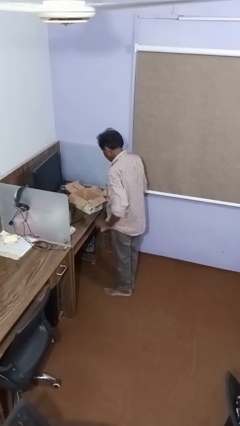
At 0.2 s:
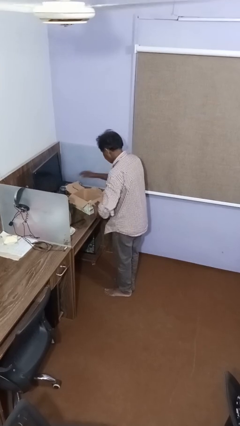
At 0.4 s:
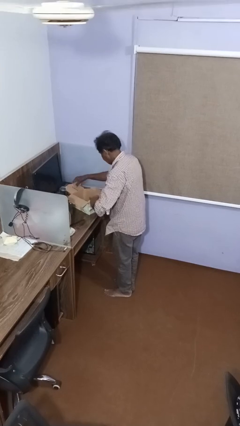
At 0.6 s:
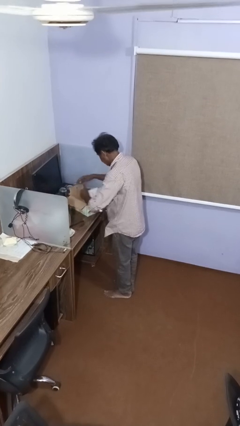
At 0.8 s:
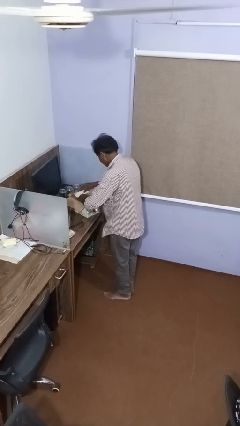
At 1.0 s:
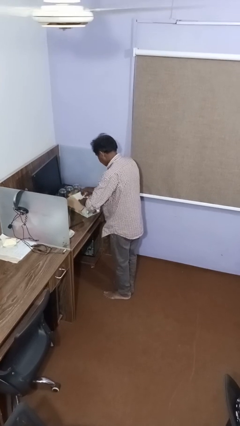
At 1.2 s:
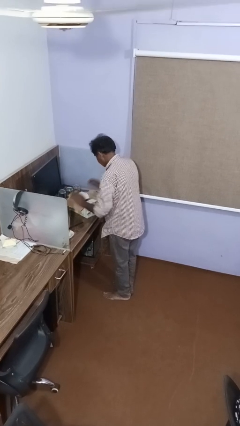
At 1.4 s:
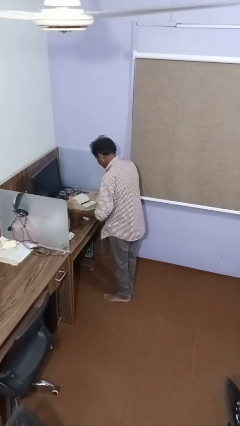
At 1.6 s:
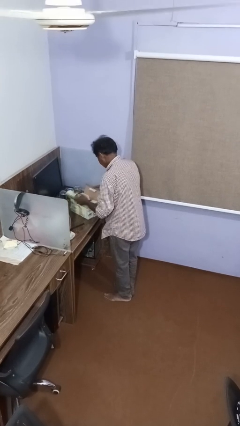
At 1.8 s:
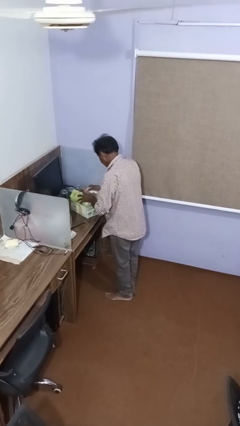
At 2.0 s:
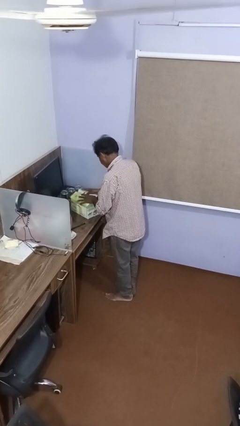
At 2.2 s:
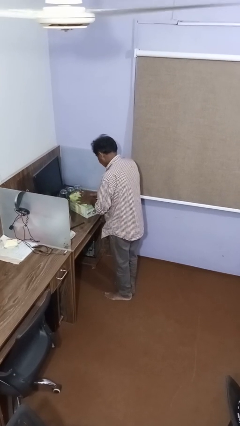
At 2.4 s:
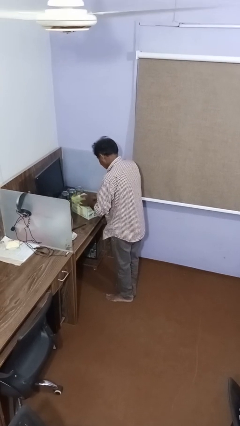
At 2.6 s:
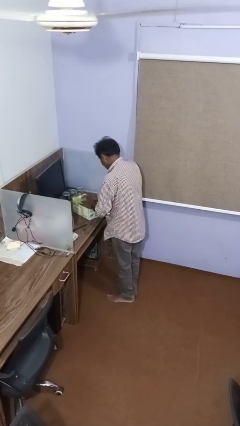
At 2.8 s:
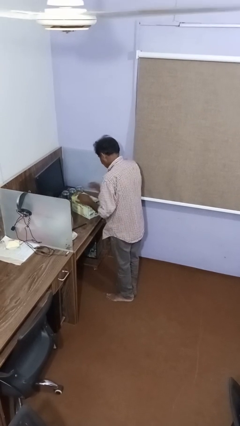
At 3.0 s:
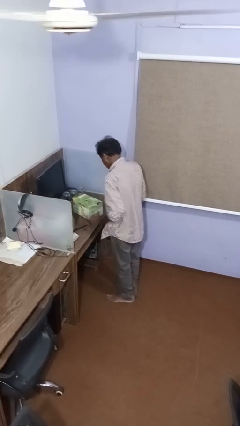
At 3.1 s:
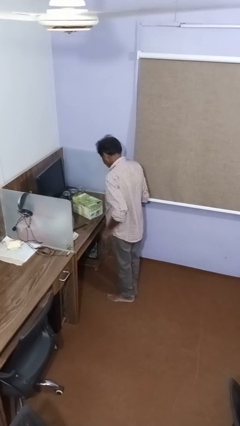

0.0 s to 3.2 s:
person closes box

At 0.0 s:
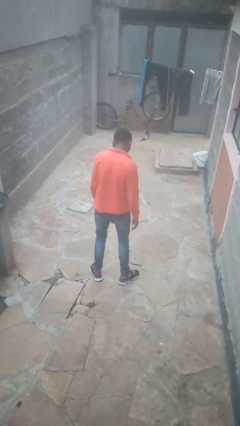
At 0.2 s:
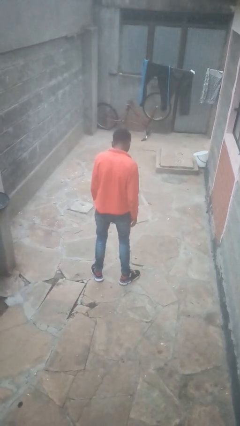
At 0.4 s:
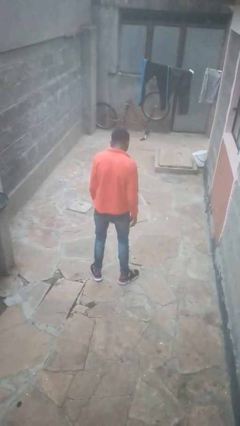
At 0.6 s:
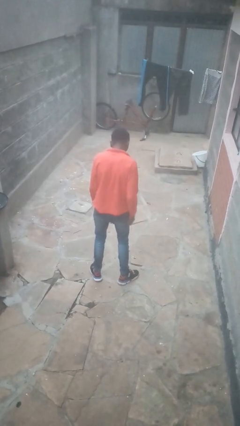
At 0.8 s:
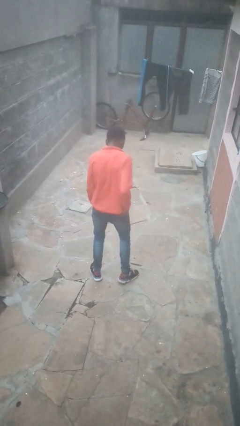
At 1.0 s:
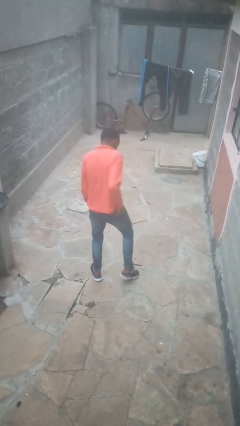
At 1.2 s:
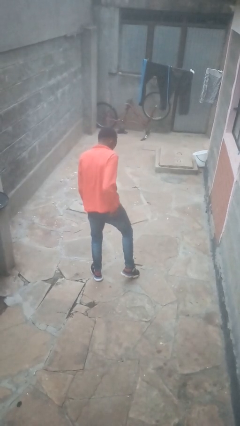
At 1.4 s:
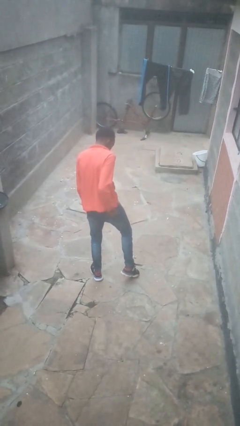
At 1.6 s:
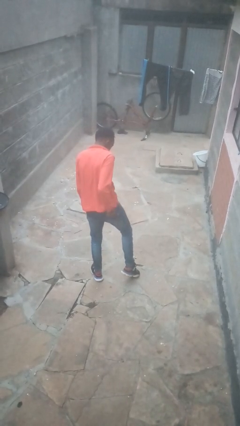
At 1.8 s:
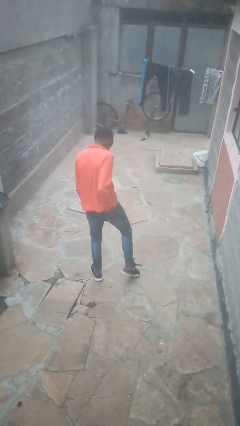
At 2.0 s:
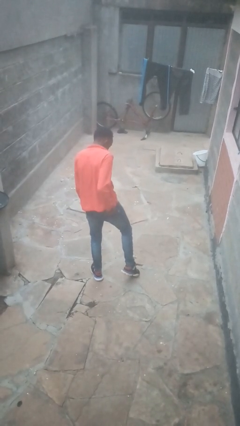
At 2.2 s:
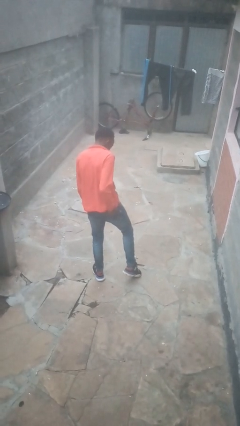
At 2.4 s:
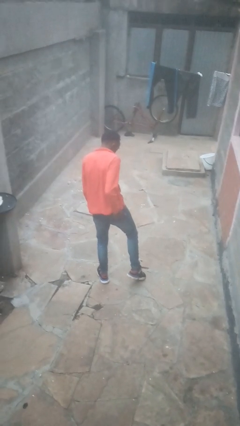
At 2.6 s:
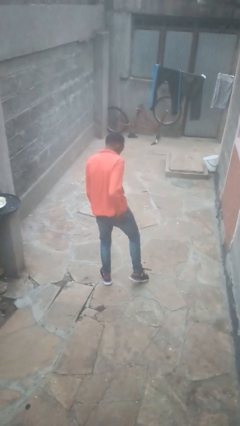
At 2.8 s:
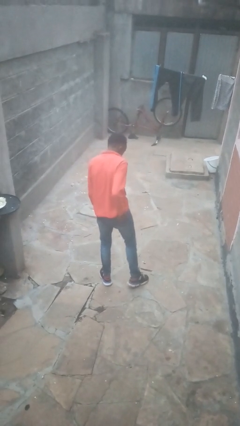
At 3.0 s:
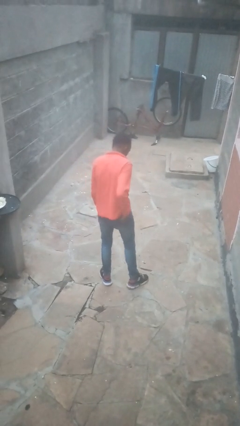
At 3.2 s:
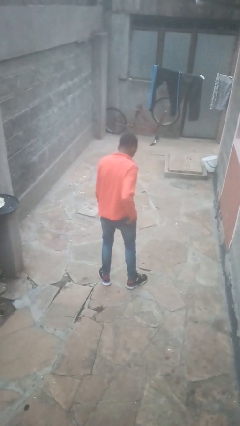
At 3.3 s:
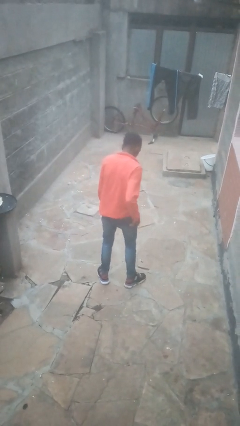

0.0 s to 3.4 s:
person puts hands in back pockets

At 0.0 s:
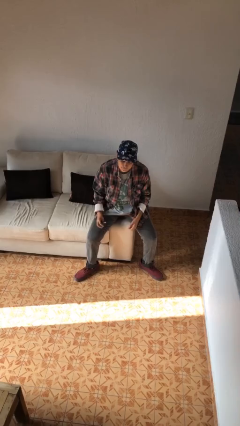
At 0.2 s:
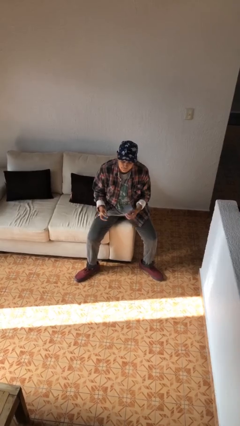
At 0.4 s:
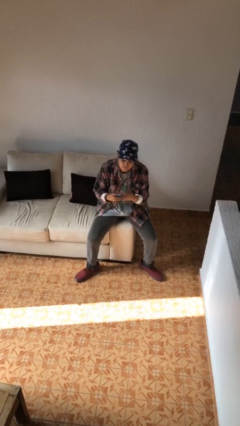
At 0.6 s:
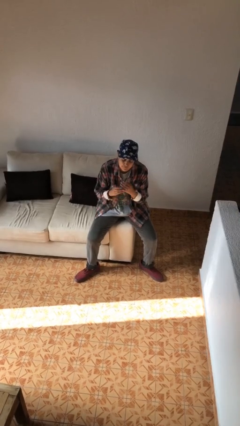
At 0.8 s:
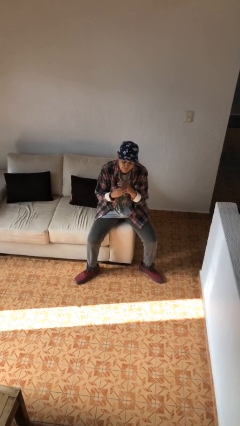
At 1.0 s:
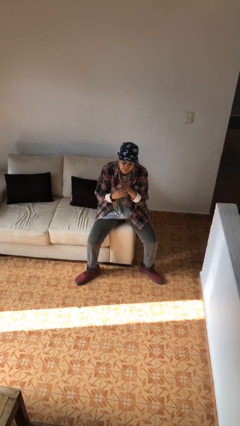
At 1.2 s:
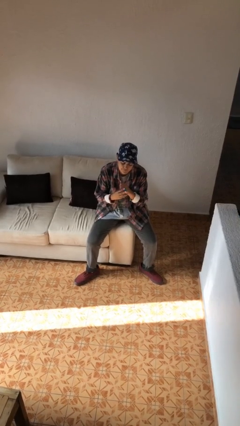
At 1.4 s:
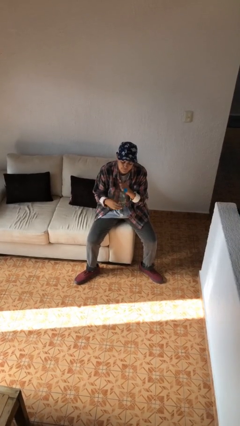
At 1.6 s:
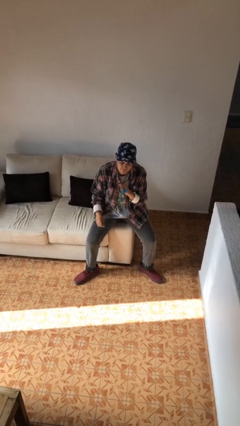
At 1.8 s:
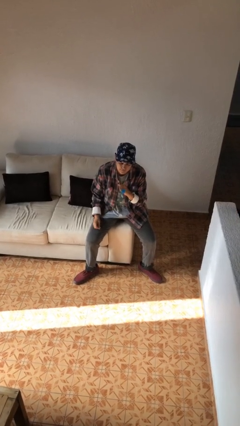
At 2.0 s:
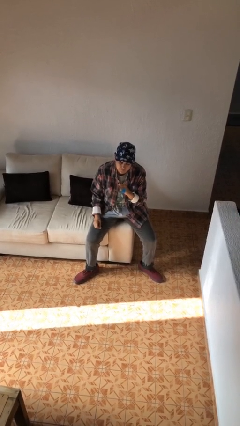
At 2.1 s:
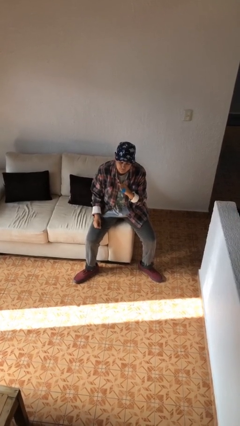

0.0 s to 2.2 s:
person puts on ring

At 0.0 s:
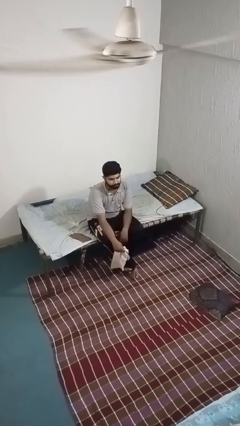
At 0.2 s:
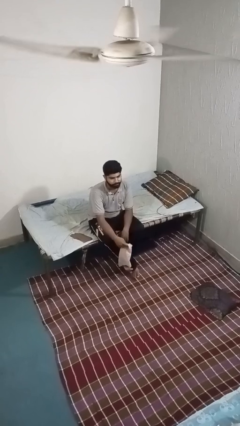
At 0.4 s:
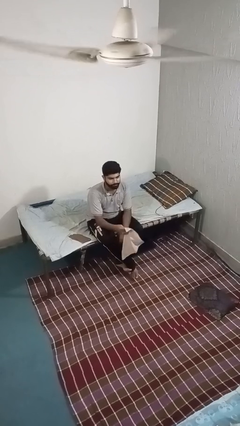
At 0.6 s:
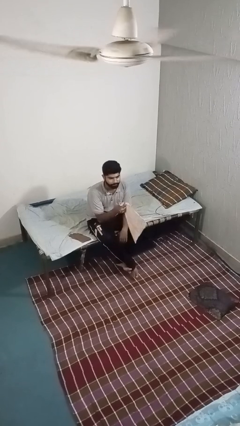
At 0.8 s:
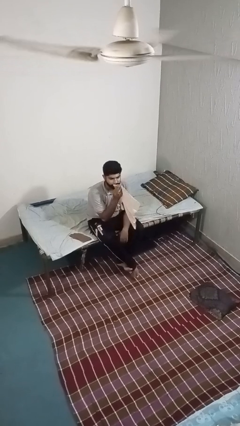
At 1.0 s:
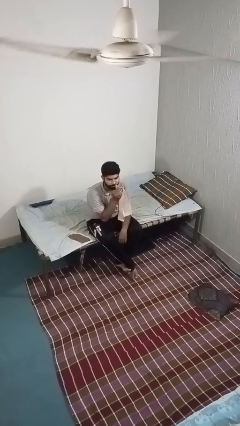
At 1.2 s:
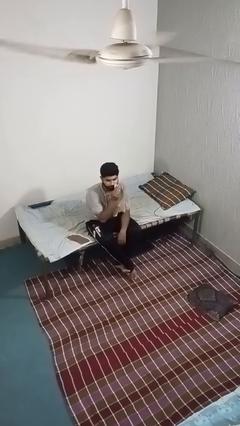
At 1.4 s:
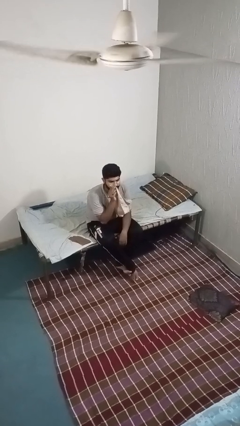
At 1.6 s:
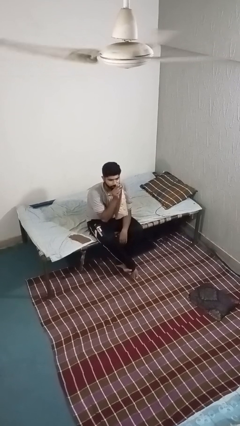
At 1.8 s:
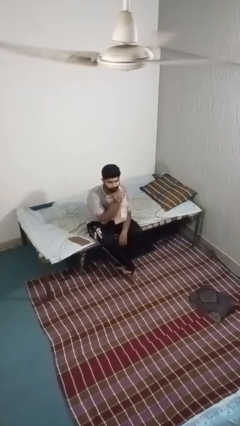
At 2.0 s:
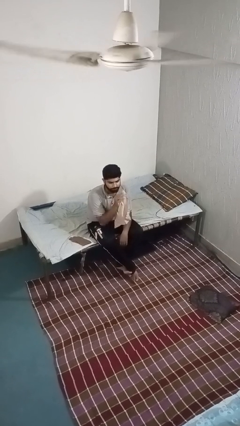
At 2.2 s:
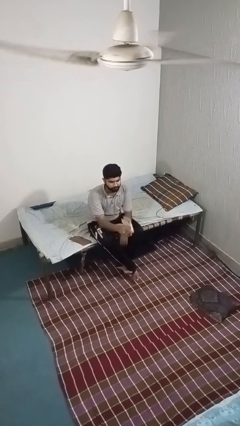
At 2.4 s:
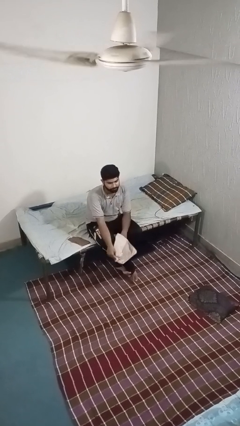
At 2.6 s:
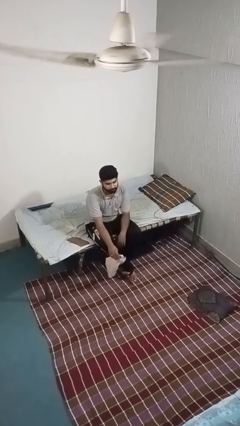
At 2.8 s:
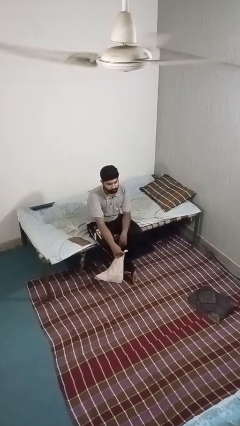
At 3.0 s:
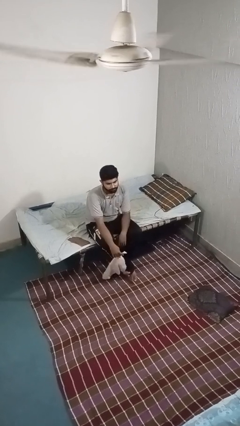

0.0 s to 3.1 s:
person wipes mouth with napkin

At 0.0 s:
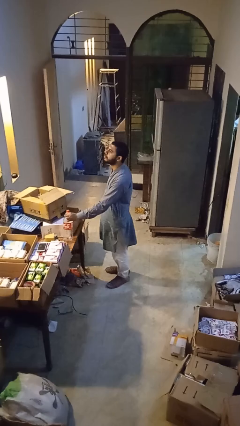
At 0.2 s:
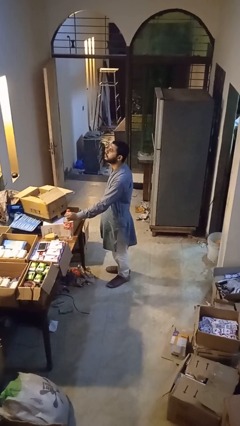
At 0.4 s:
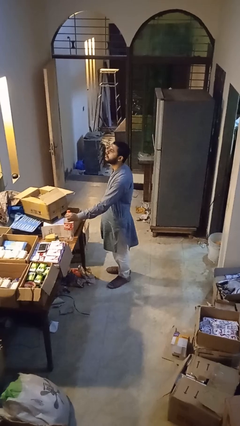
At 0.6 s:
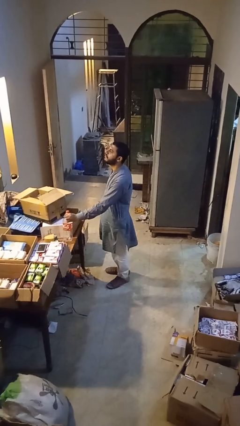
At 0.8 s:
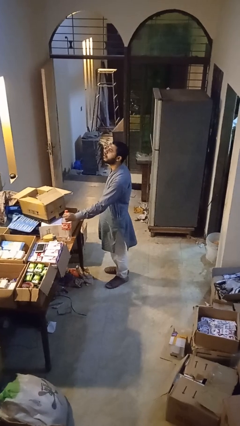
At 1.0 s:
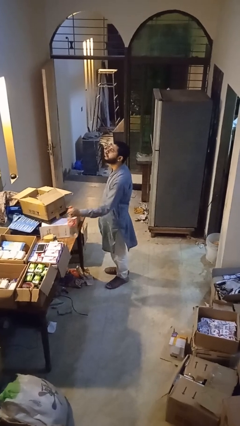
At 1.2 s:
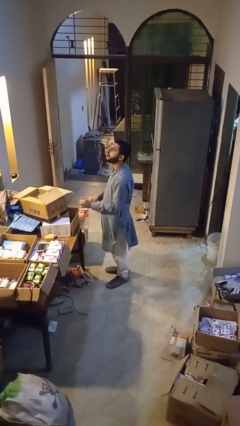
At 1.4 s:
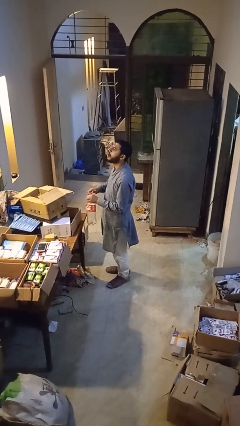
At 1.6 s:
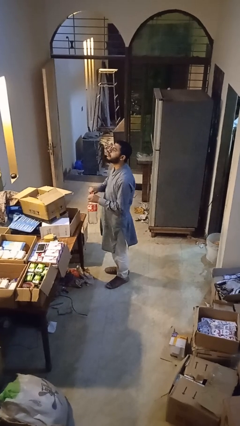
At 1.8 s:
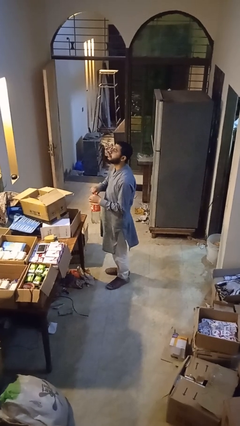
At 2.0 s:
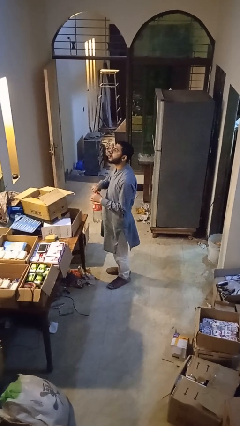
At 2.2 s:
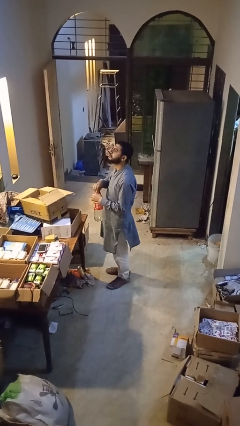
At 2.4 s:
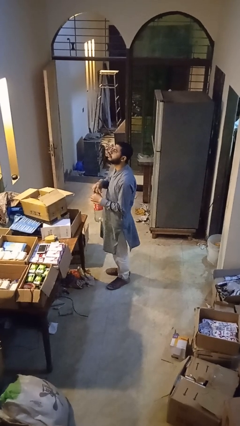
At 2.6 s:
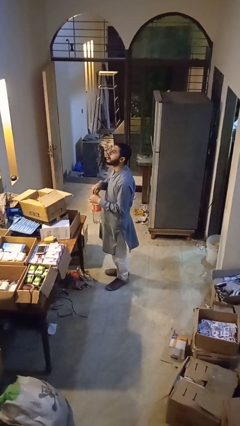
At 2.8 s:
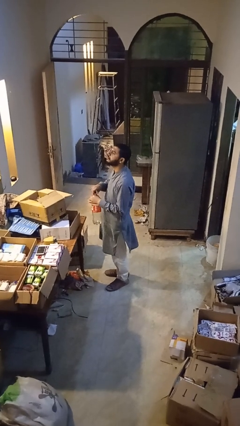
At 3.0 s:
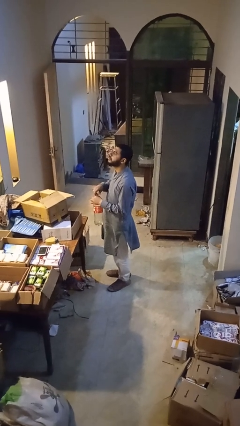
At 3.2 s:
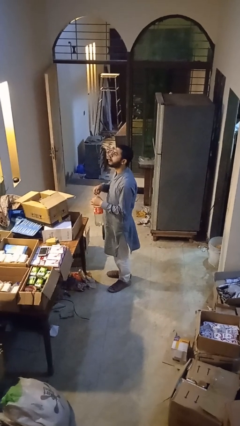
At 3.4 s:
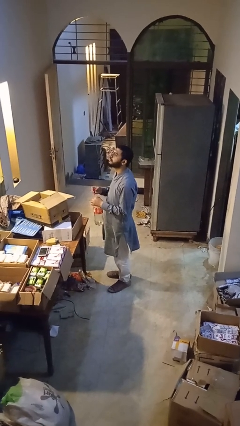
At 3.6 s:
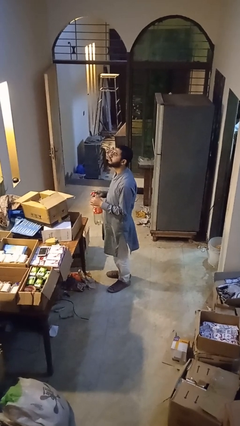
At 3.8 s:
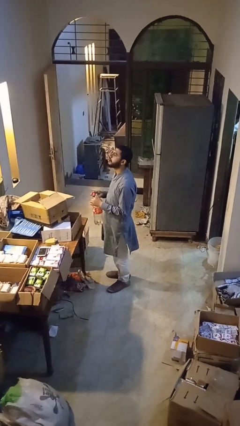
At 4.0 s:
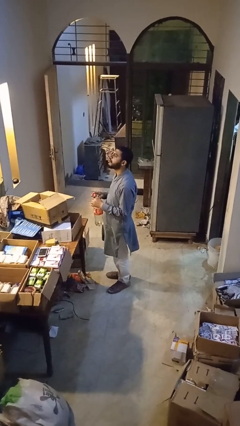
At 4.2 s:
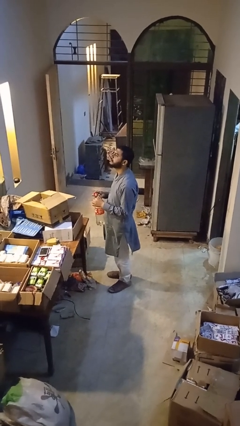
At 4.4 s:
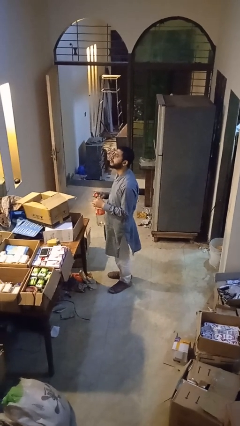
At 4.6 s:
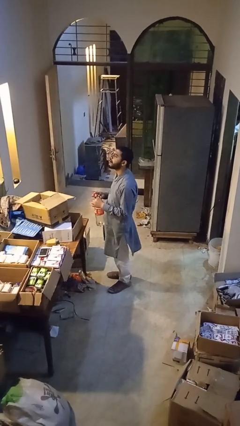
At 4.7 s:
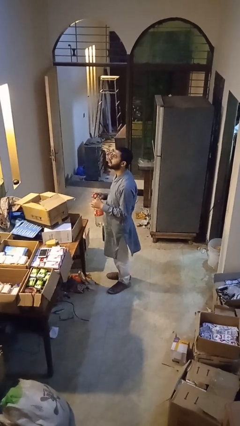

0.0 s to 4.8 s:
person unscrews lid from bottle

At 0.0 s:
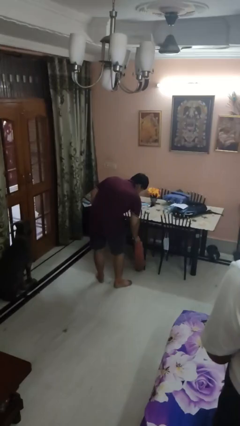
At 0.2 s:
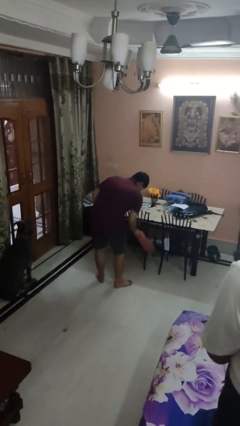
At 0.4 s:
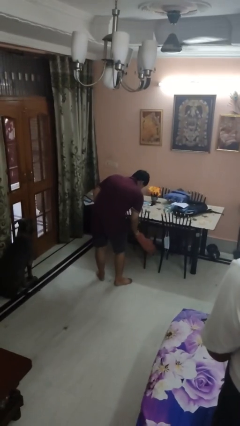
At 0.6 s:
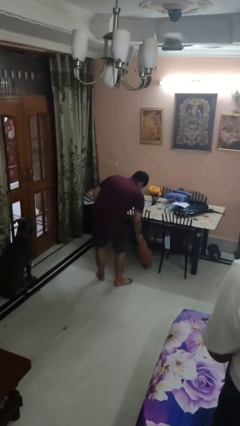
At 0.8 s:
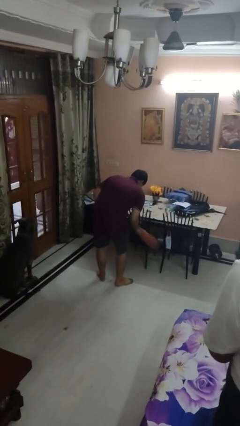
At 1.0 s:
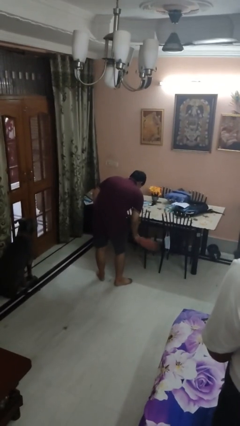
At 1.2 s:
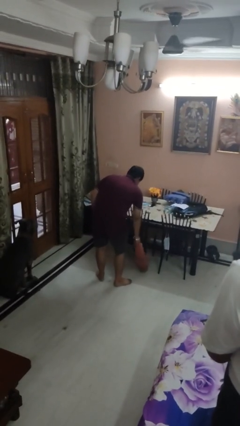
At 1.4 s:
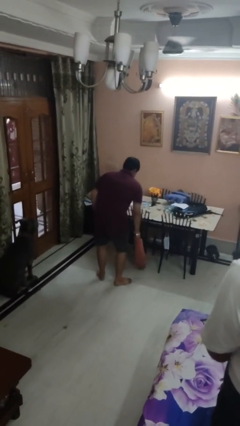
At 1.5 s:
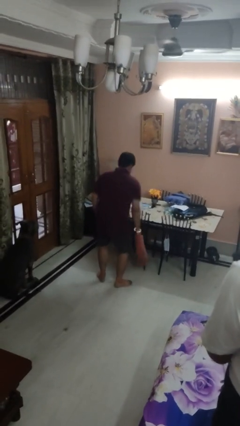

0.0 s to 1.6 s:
person dusts furniture
